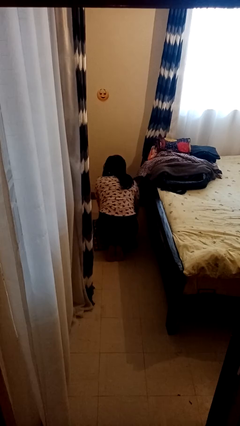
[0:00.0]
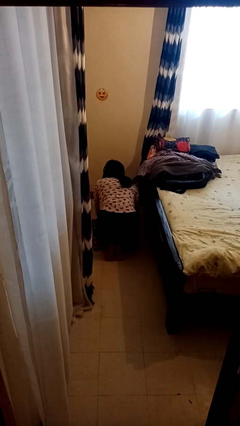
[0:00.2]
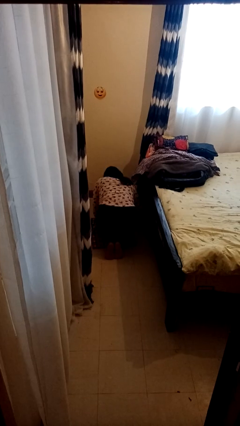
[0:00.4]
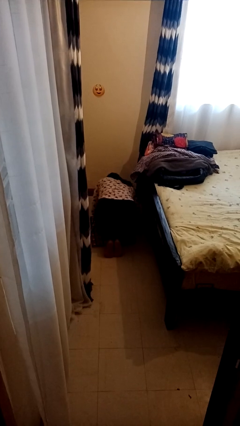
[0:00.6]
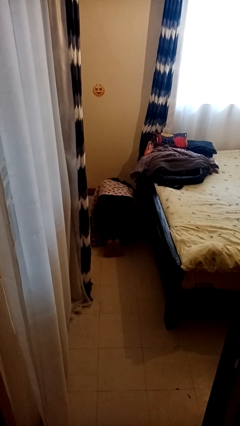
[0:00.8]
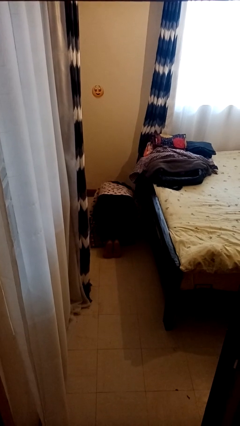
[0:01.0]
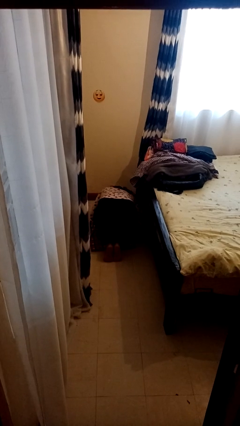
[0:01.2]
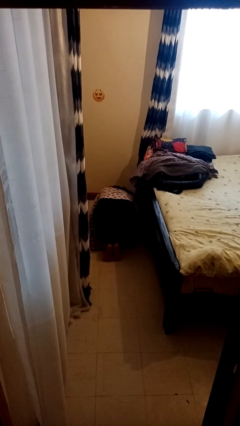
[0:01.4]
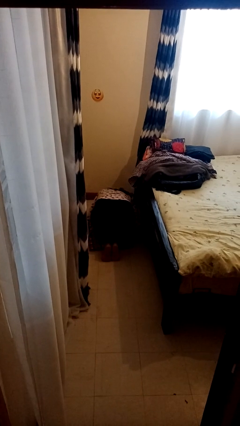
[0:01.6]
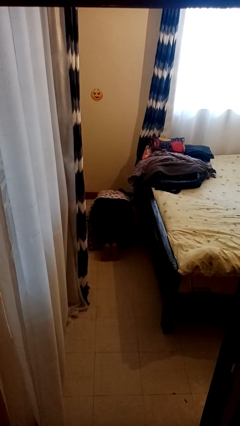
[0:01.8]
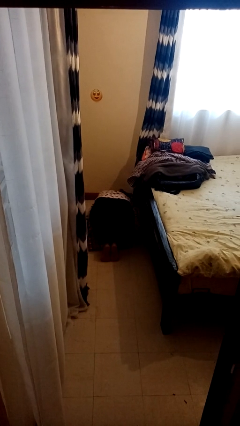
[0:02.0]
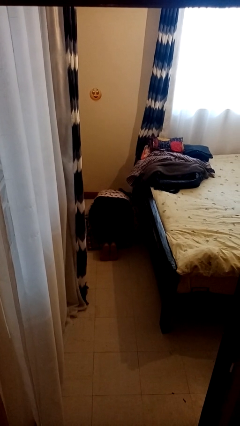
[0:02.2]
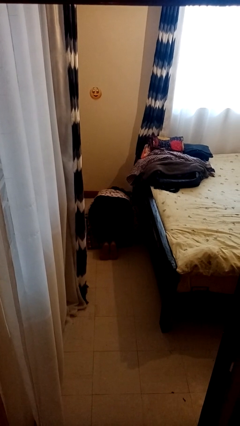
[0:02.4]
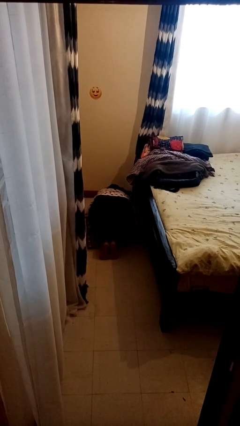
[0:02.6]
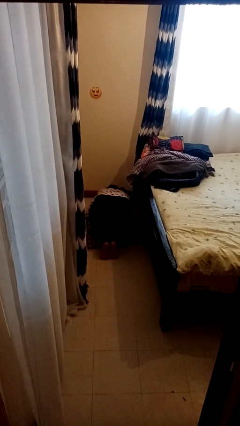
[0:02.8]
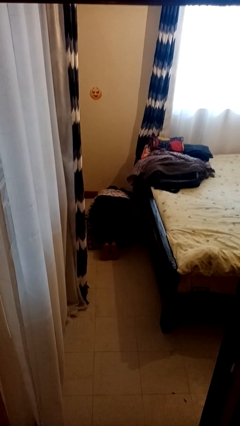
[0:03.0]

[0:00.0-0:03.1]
person searches under bed

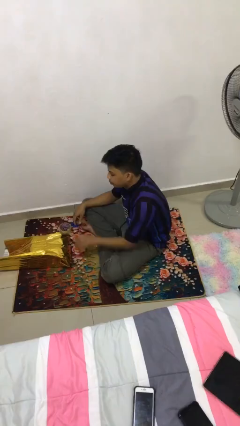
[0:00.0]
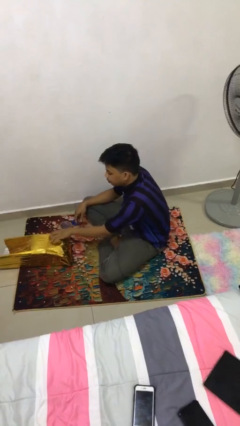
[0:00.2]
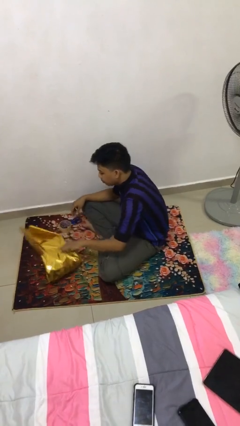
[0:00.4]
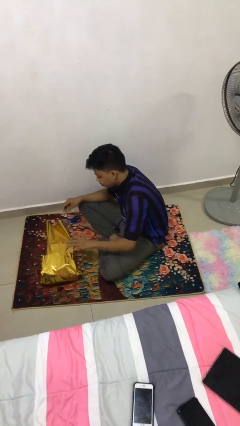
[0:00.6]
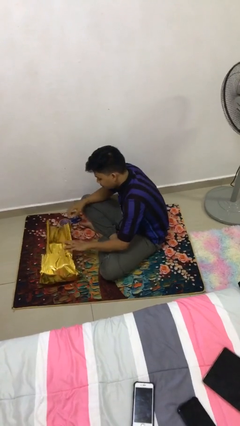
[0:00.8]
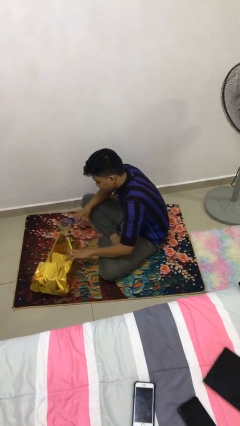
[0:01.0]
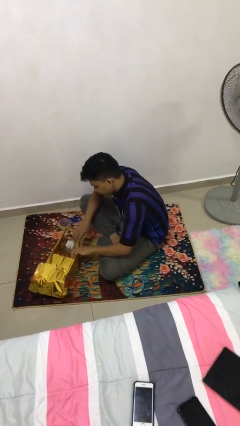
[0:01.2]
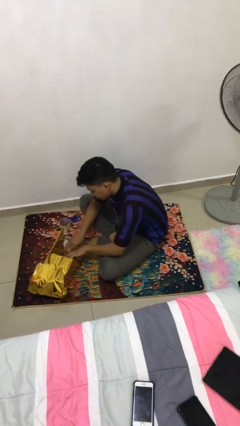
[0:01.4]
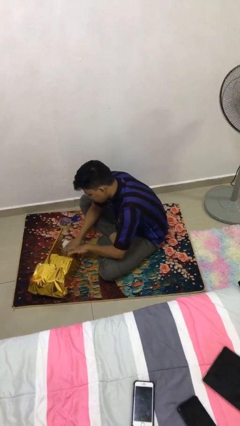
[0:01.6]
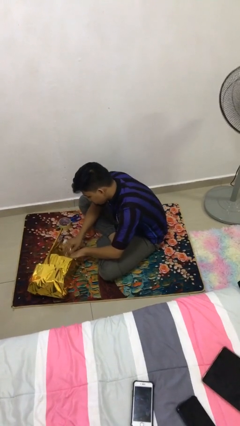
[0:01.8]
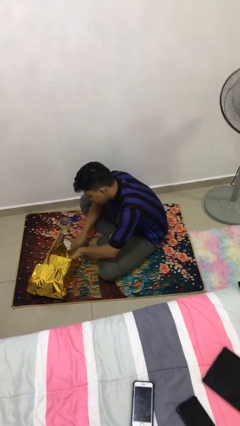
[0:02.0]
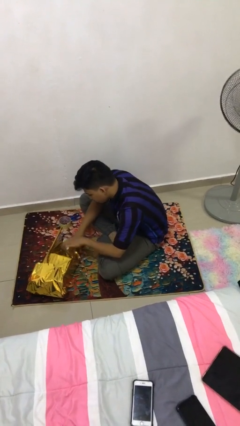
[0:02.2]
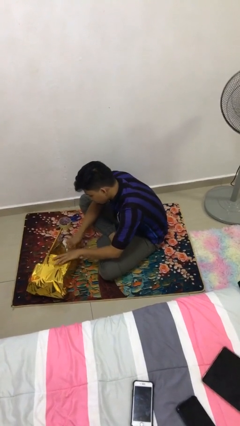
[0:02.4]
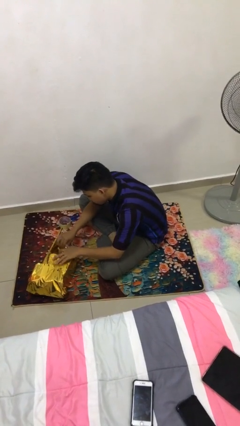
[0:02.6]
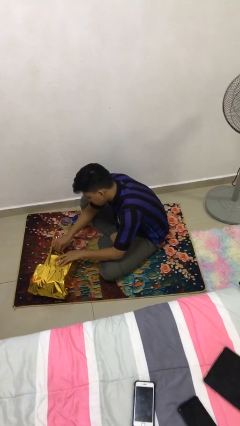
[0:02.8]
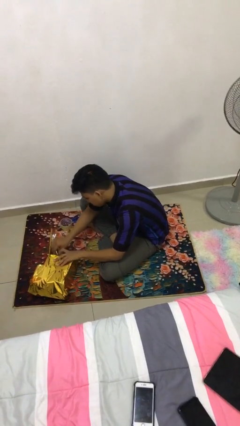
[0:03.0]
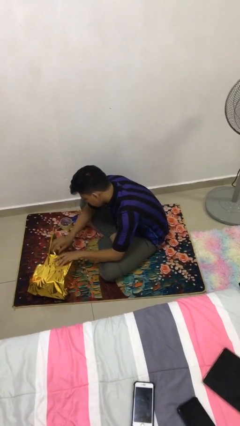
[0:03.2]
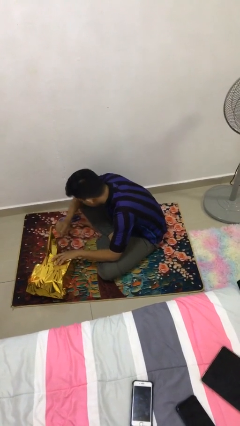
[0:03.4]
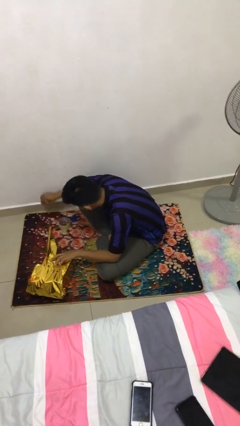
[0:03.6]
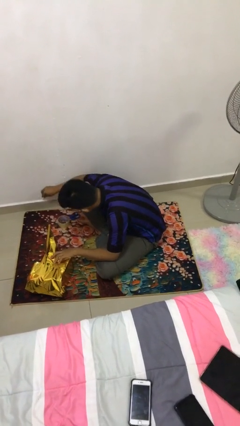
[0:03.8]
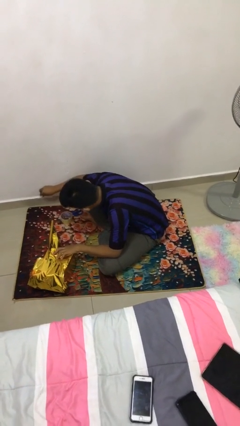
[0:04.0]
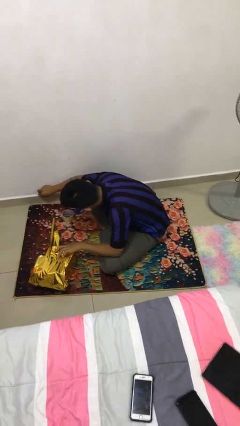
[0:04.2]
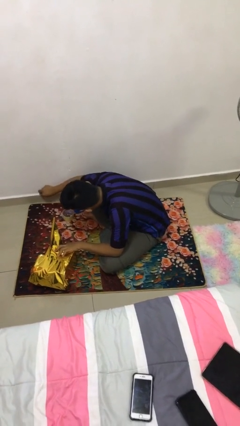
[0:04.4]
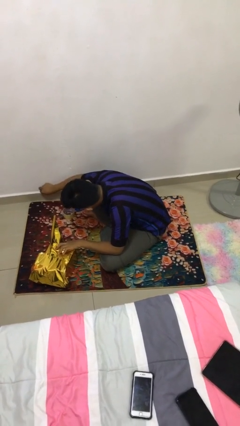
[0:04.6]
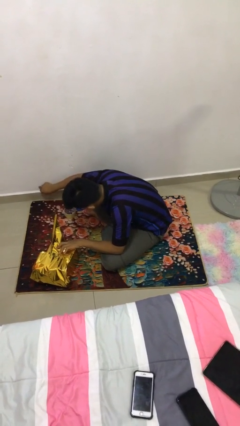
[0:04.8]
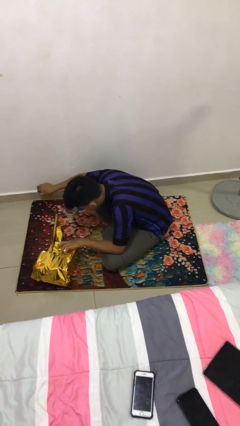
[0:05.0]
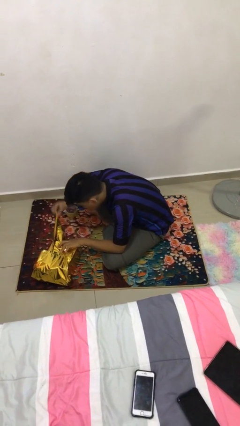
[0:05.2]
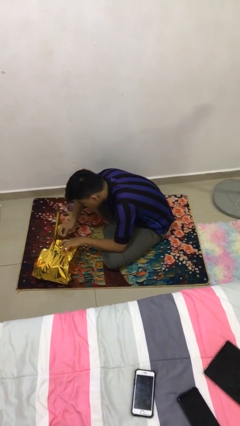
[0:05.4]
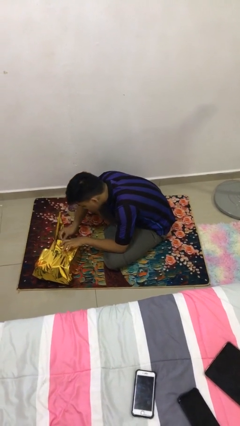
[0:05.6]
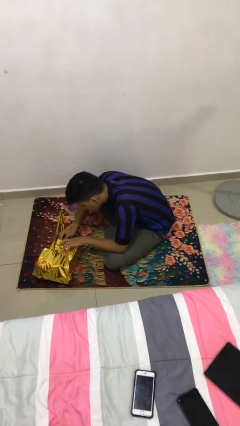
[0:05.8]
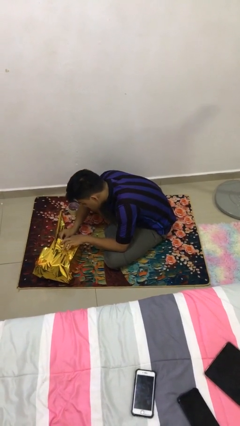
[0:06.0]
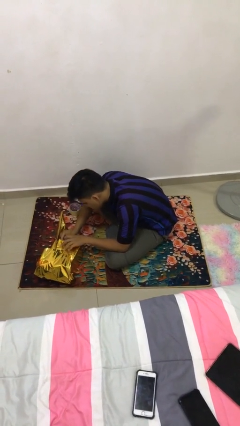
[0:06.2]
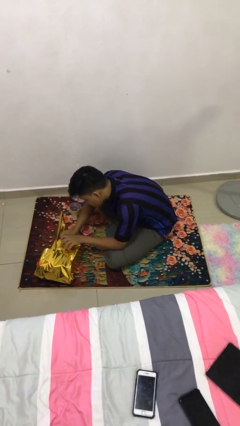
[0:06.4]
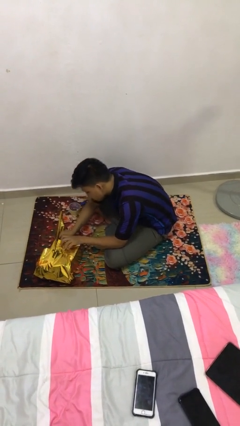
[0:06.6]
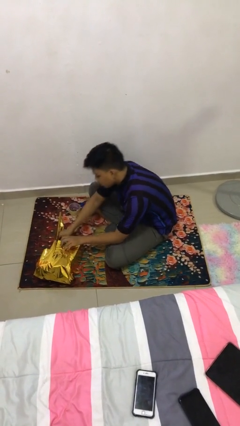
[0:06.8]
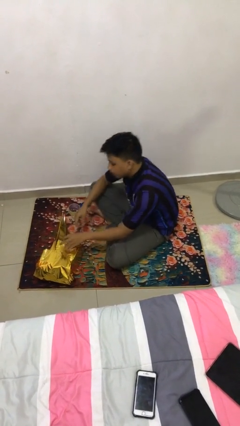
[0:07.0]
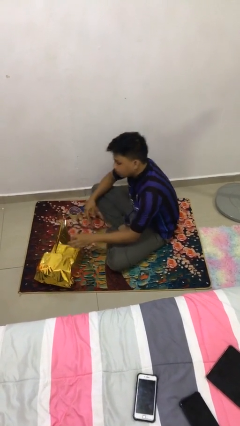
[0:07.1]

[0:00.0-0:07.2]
person wraps box

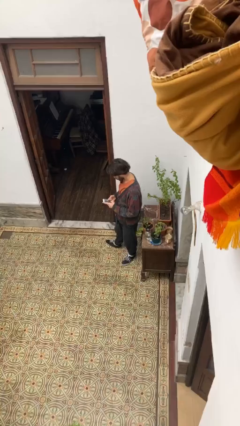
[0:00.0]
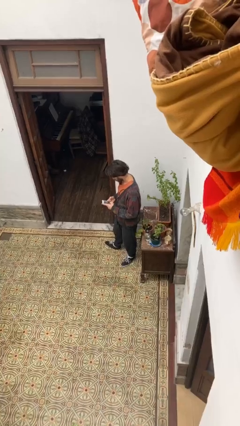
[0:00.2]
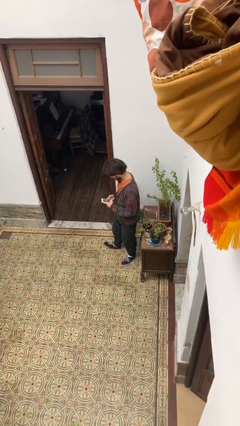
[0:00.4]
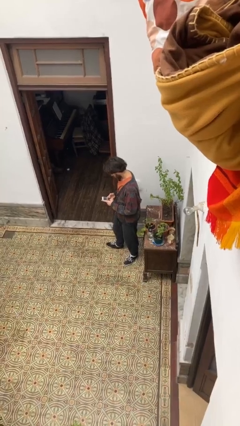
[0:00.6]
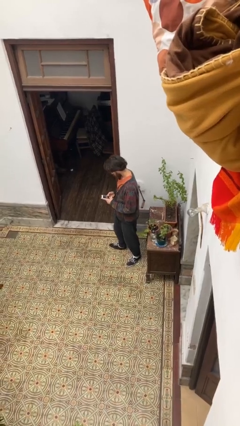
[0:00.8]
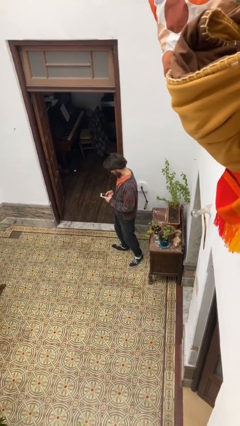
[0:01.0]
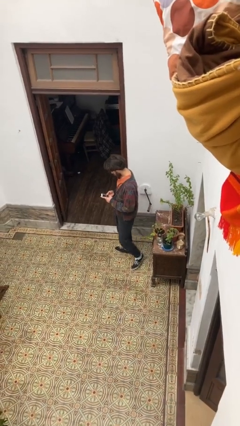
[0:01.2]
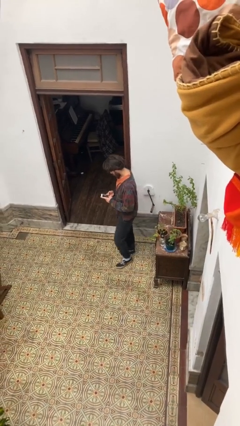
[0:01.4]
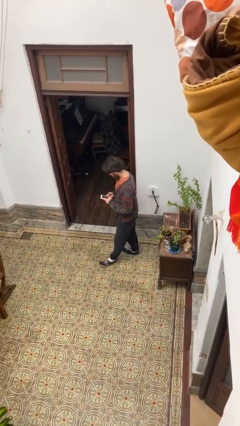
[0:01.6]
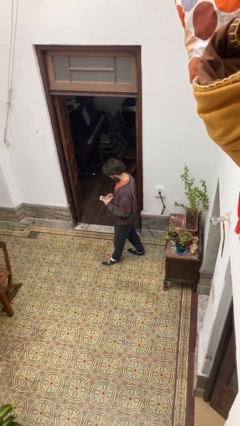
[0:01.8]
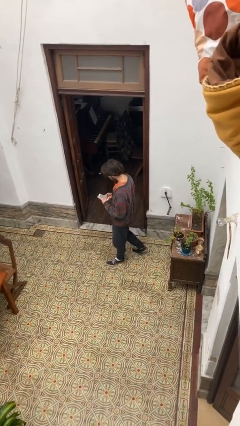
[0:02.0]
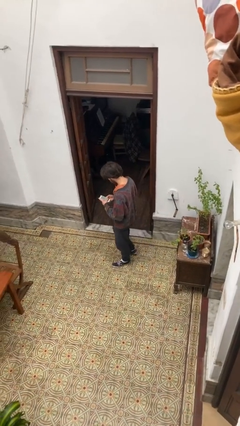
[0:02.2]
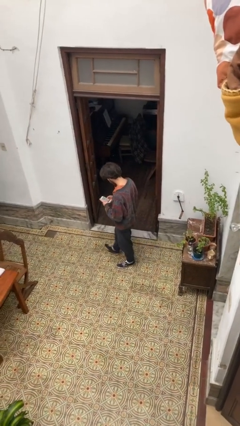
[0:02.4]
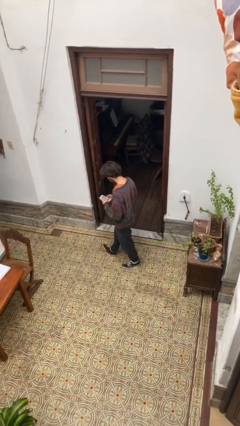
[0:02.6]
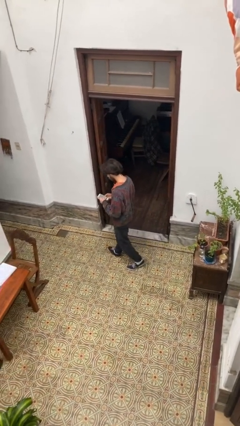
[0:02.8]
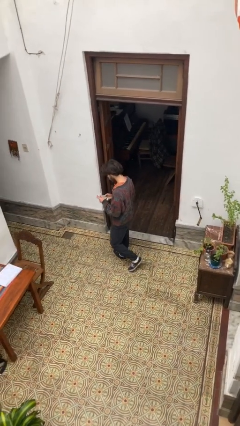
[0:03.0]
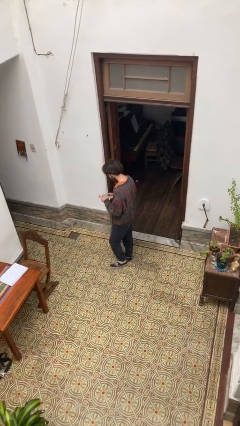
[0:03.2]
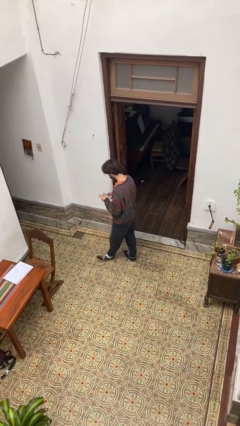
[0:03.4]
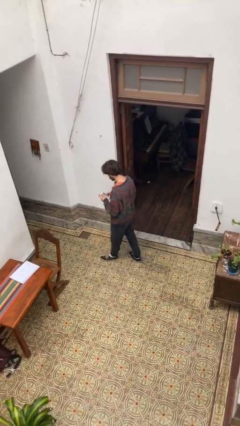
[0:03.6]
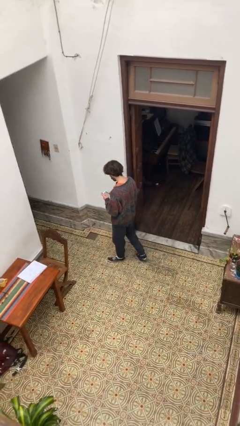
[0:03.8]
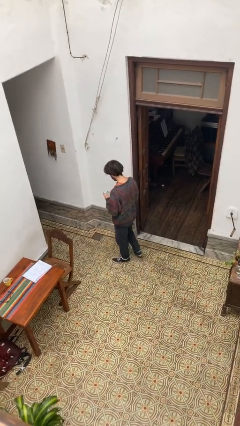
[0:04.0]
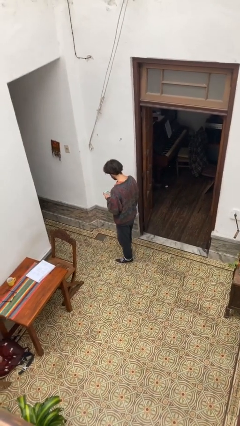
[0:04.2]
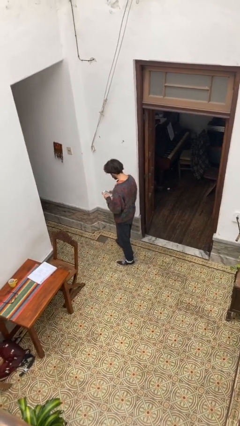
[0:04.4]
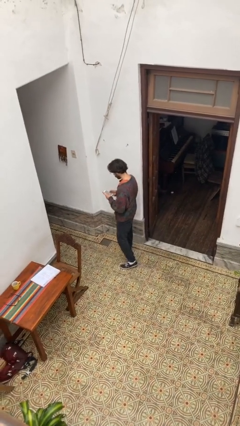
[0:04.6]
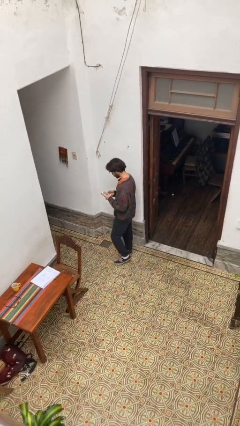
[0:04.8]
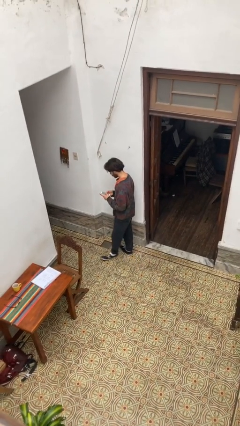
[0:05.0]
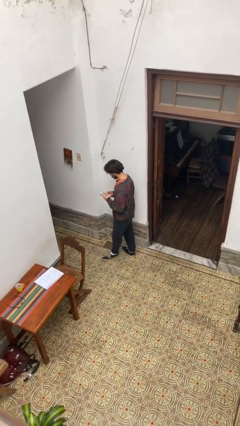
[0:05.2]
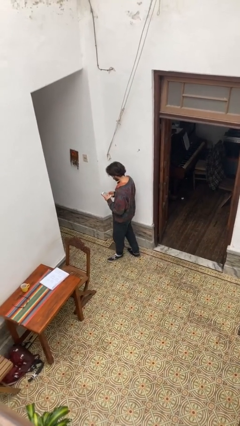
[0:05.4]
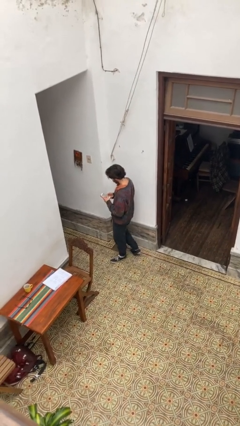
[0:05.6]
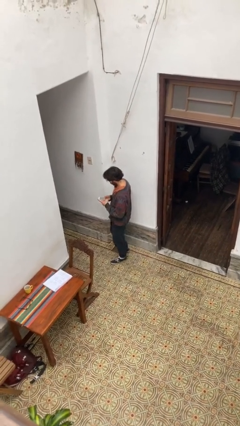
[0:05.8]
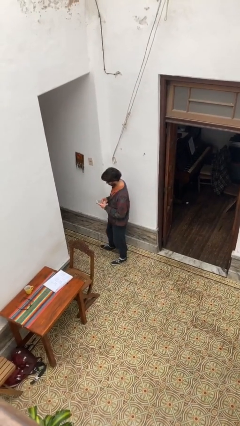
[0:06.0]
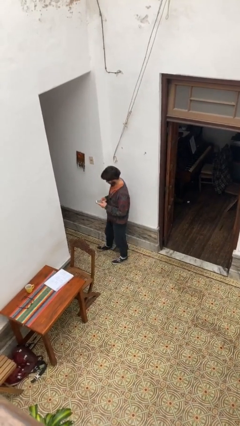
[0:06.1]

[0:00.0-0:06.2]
person texts on phone

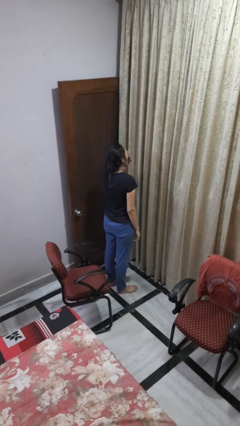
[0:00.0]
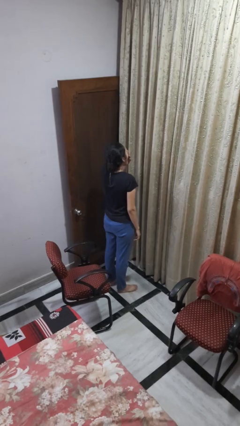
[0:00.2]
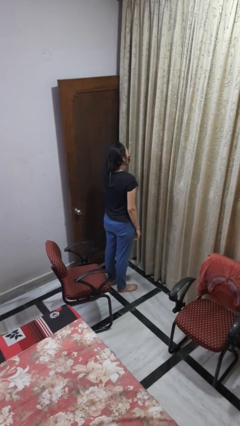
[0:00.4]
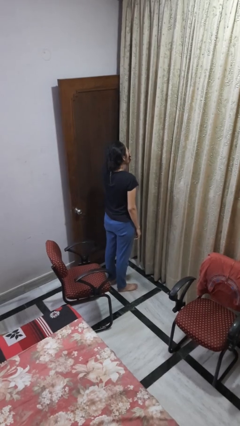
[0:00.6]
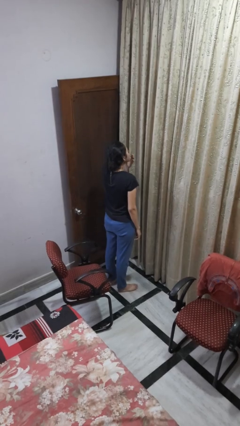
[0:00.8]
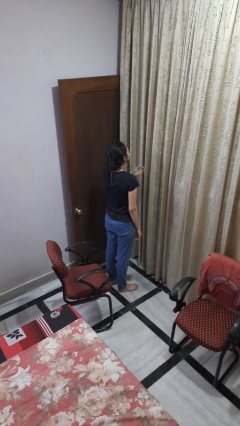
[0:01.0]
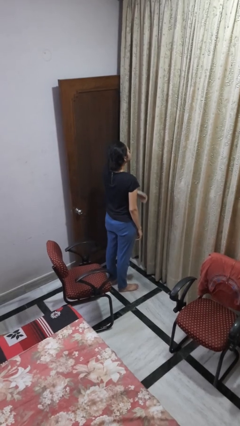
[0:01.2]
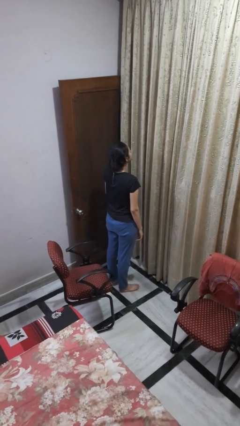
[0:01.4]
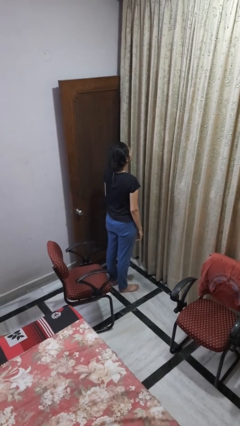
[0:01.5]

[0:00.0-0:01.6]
person yawns
